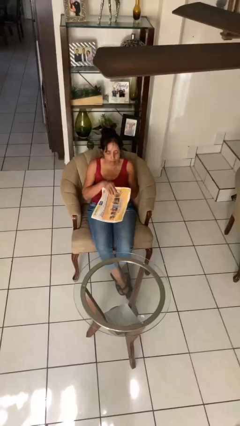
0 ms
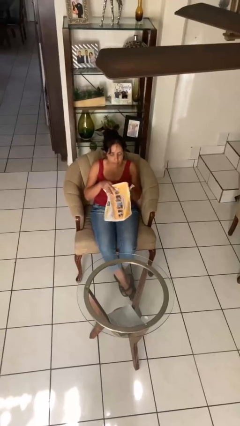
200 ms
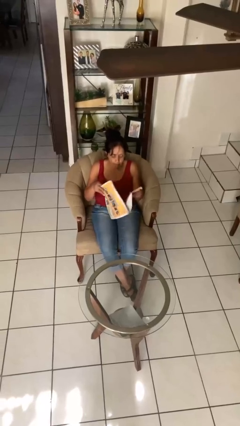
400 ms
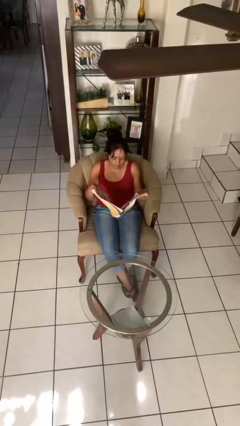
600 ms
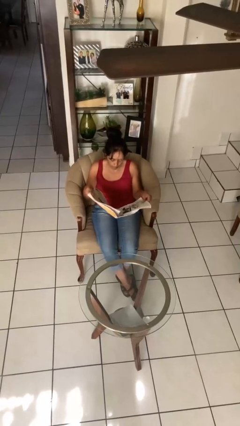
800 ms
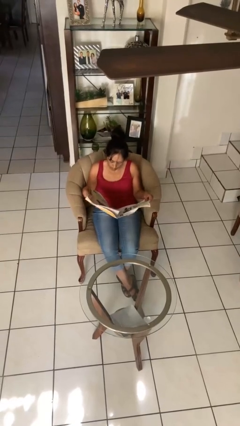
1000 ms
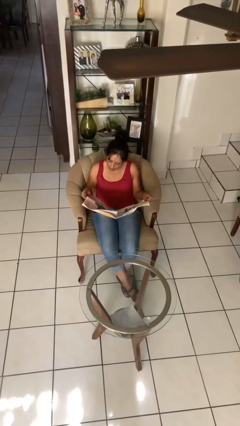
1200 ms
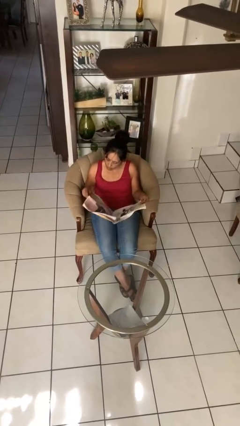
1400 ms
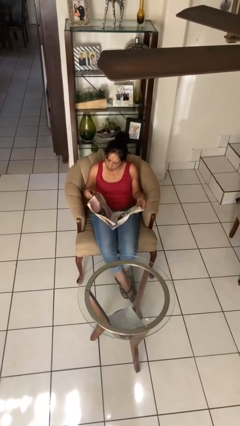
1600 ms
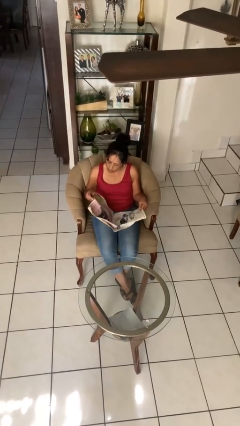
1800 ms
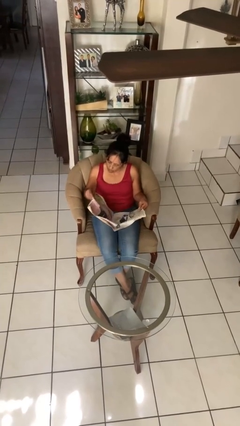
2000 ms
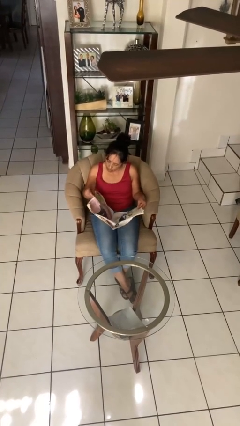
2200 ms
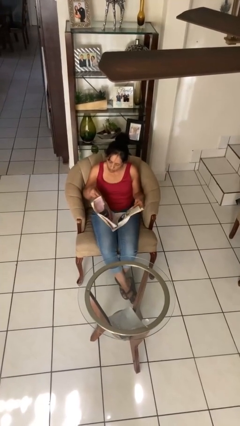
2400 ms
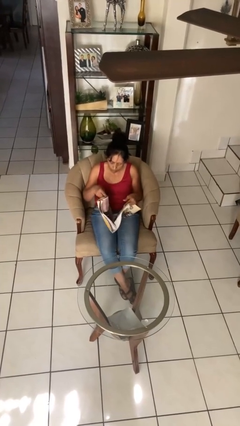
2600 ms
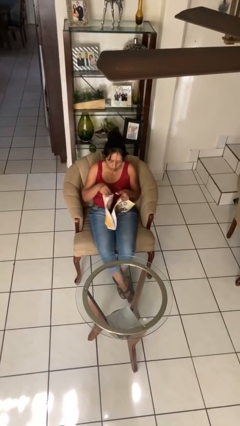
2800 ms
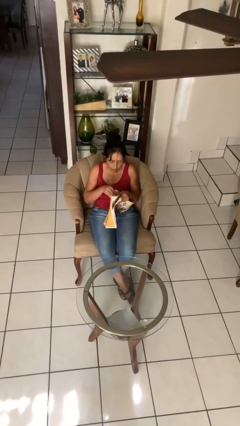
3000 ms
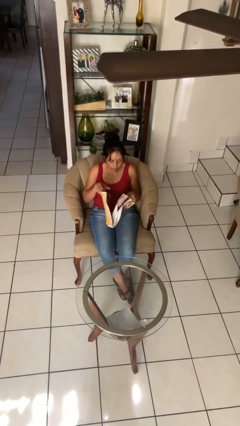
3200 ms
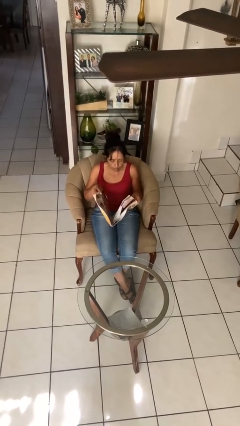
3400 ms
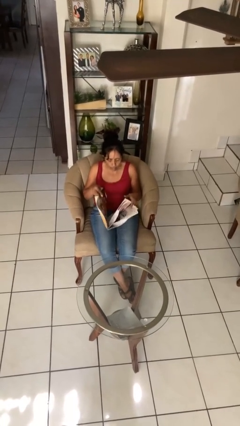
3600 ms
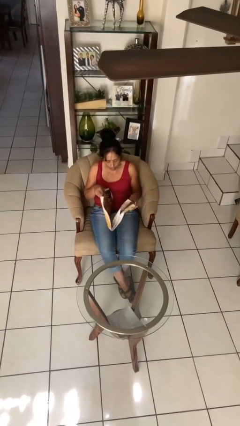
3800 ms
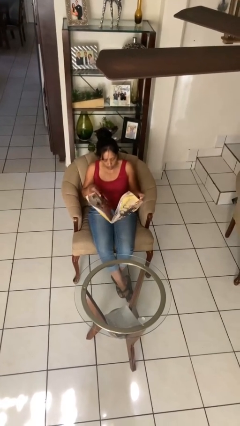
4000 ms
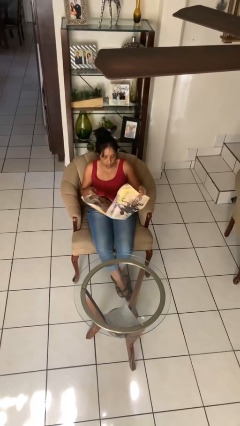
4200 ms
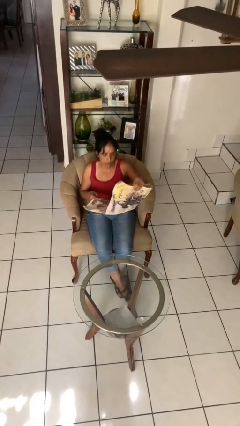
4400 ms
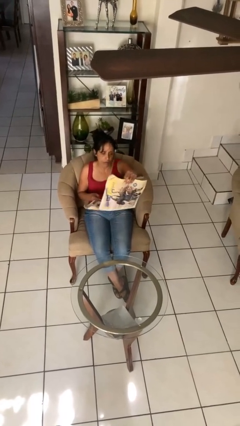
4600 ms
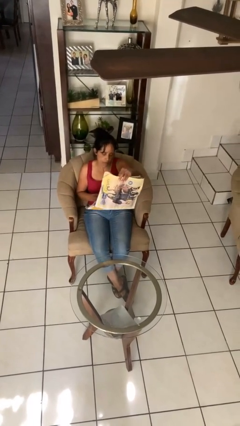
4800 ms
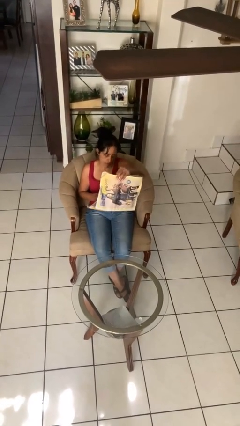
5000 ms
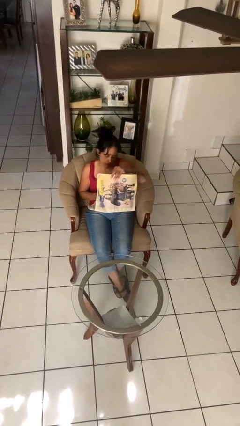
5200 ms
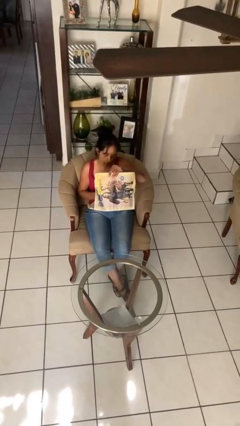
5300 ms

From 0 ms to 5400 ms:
person reads newspaper

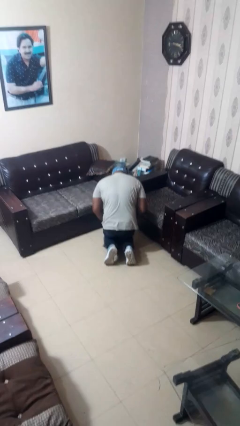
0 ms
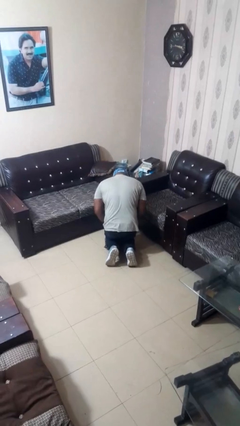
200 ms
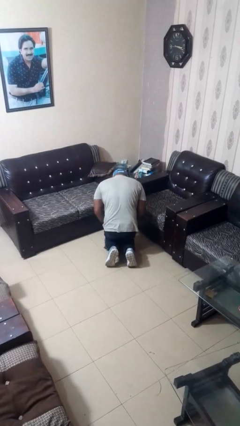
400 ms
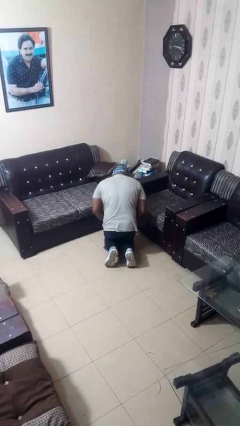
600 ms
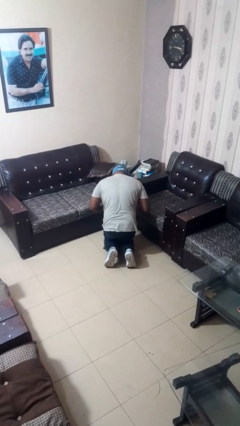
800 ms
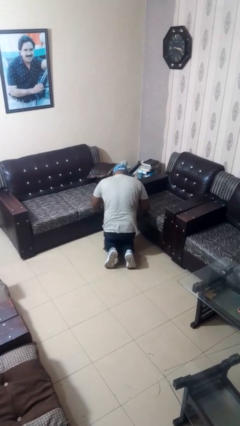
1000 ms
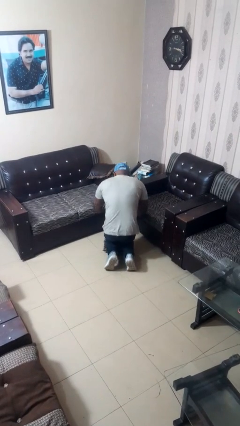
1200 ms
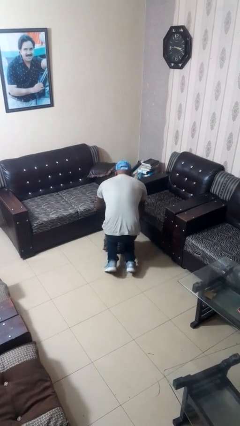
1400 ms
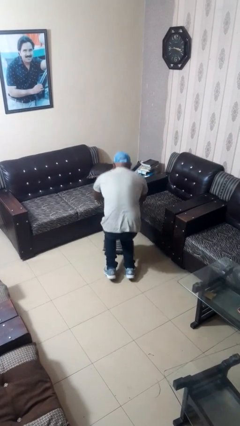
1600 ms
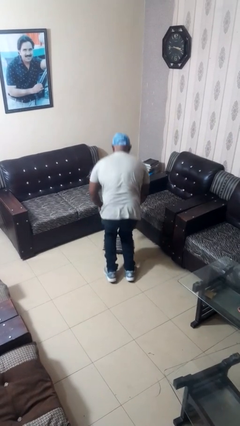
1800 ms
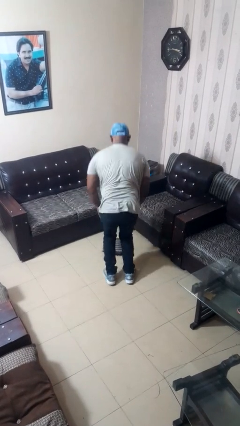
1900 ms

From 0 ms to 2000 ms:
person stands up from floor

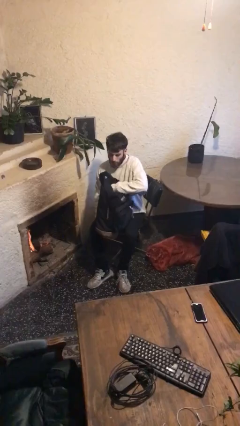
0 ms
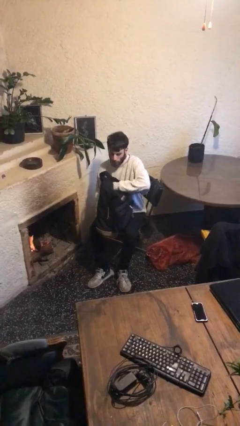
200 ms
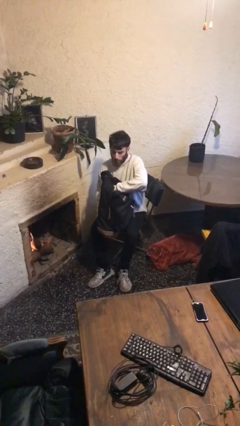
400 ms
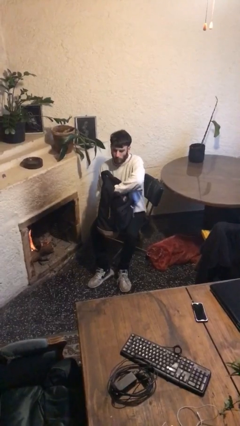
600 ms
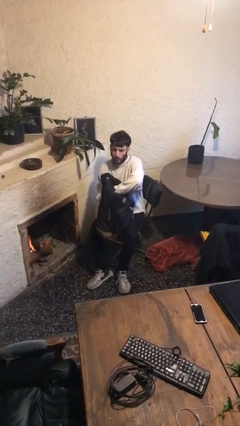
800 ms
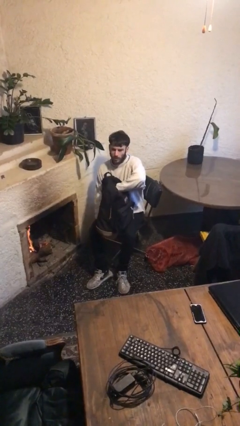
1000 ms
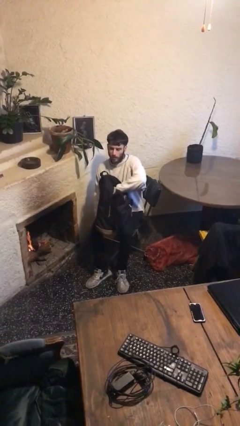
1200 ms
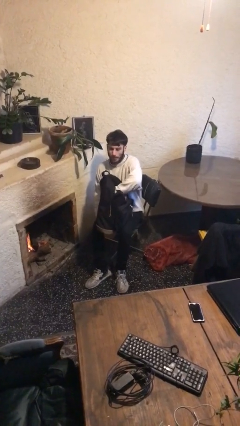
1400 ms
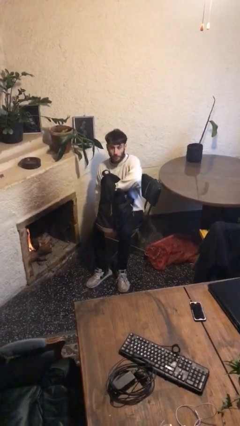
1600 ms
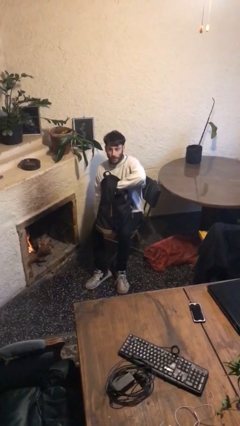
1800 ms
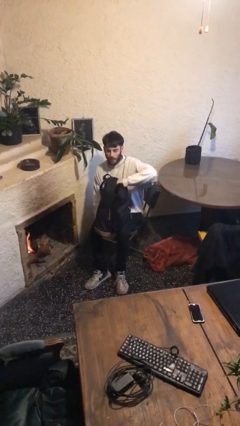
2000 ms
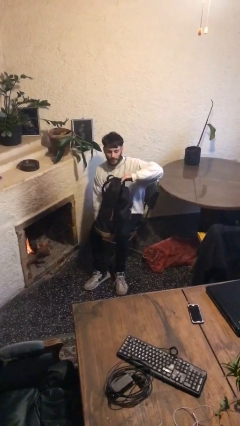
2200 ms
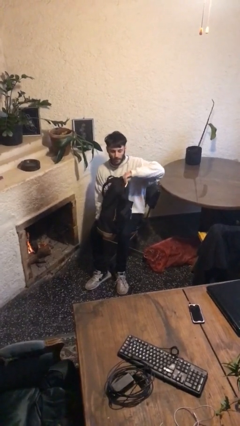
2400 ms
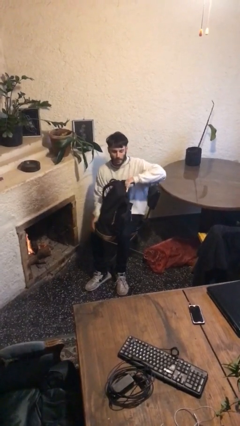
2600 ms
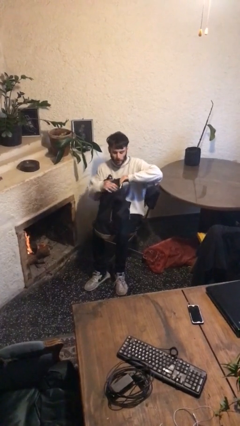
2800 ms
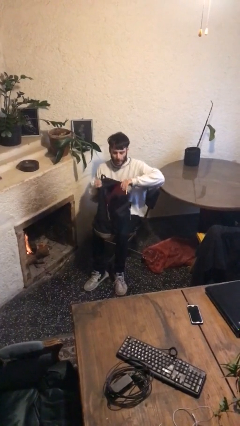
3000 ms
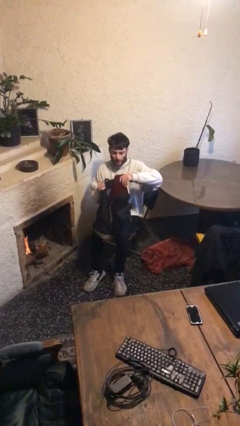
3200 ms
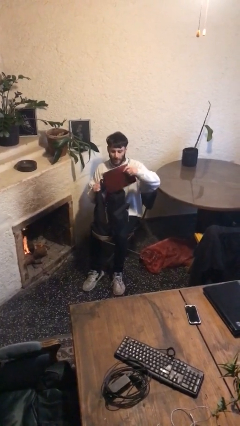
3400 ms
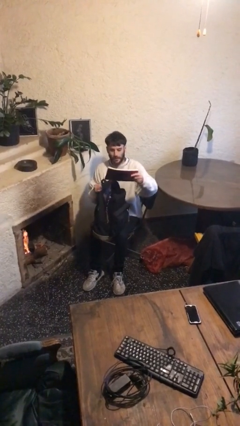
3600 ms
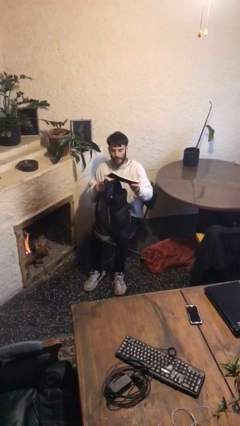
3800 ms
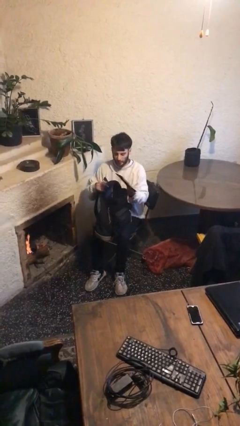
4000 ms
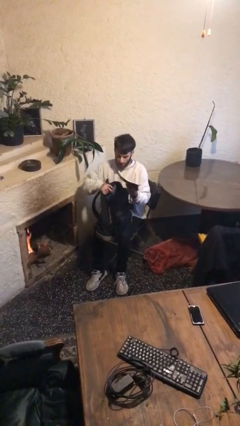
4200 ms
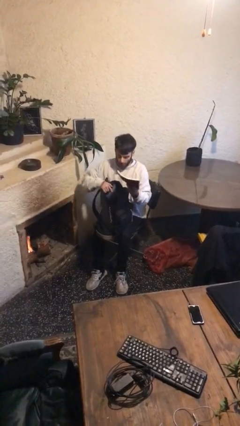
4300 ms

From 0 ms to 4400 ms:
person takes object from backpack

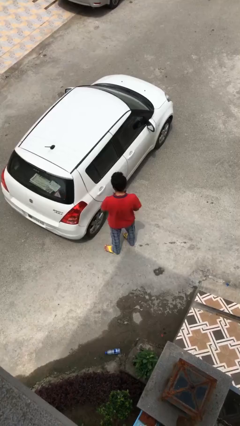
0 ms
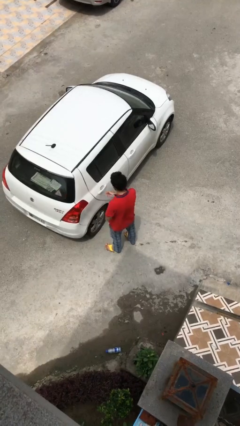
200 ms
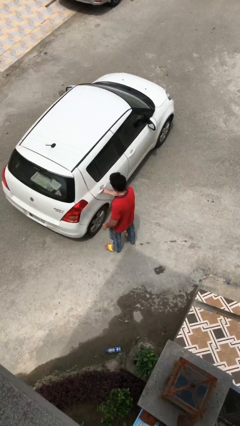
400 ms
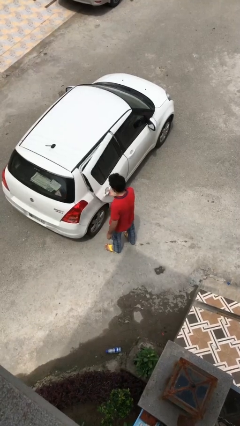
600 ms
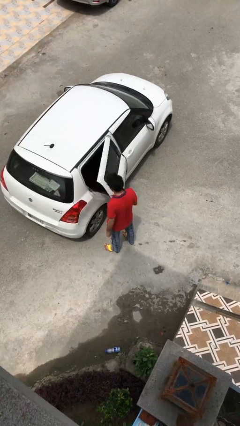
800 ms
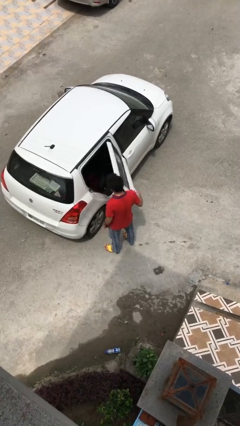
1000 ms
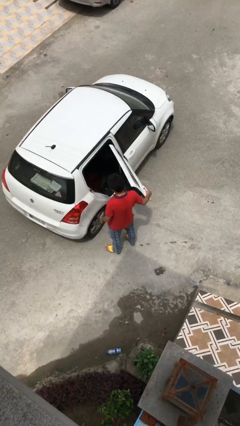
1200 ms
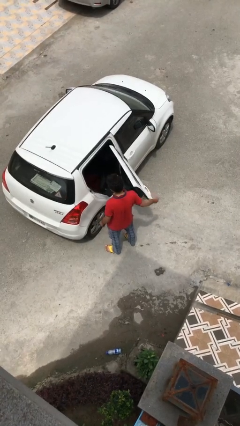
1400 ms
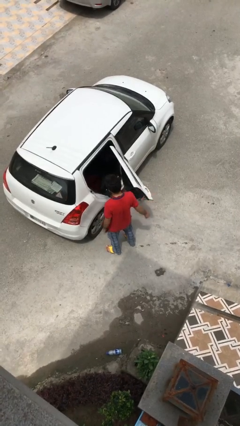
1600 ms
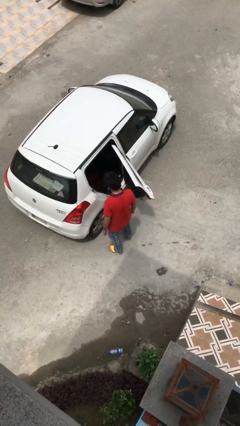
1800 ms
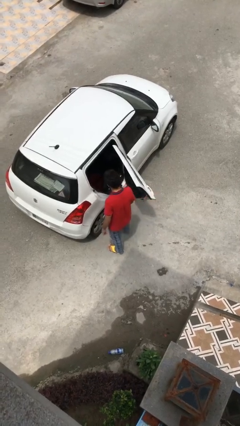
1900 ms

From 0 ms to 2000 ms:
person opens car door

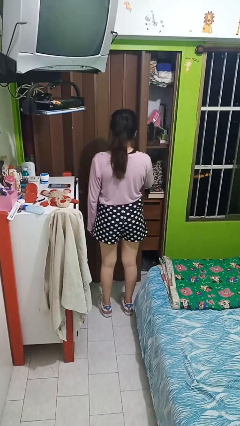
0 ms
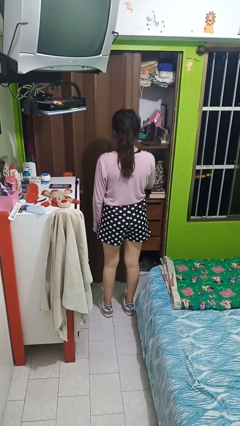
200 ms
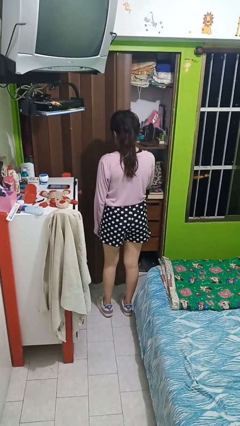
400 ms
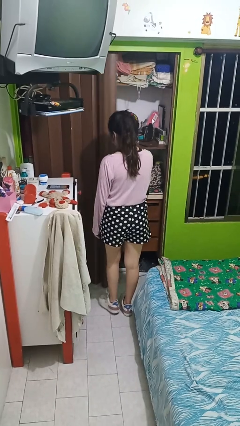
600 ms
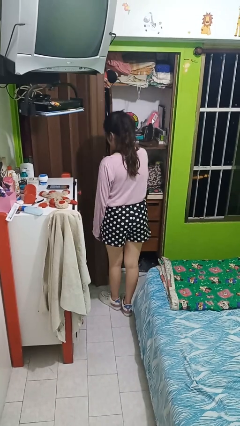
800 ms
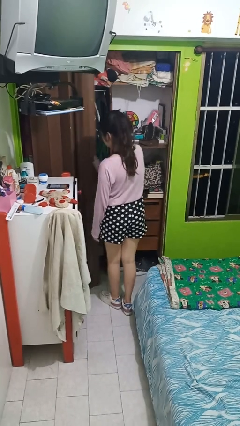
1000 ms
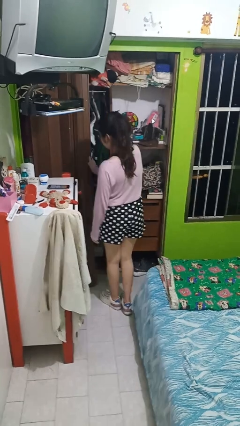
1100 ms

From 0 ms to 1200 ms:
person opens sliding door

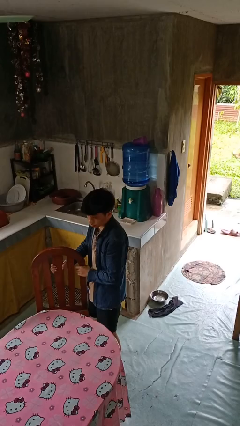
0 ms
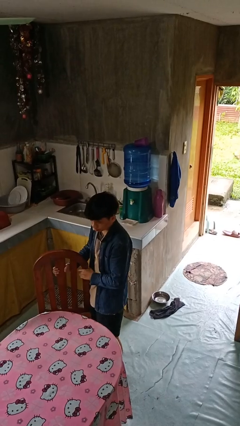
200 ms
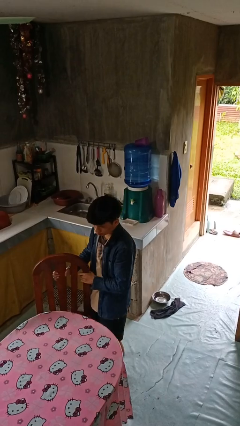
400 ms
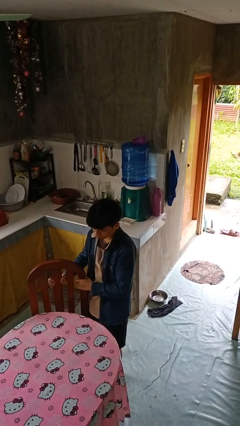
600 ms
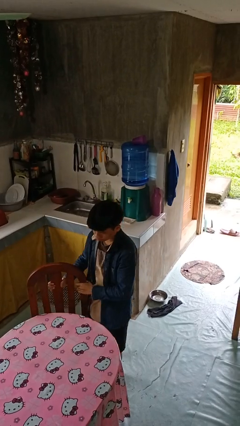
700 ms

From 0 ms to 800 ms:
person pushes in chair

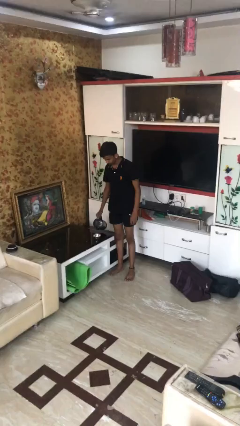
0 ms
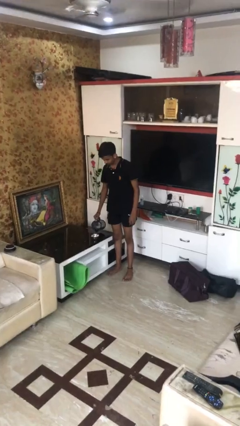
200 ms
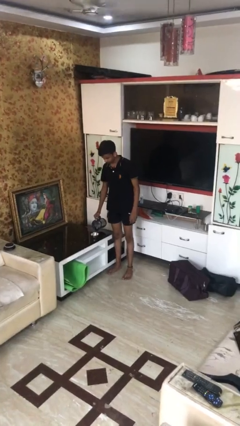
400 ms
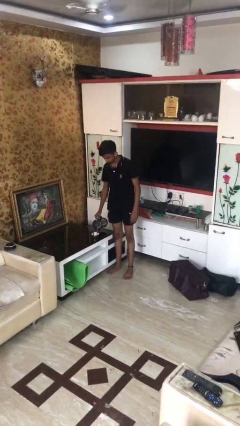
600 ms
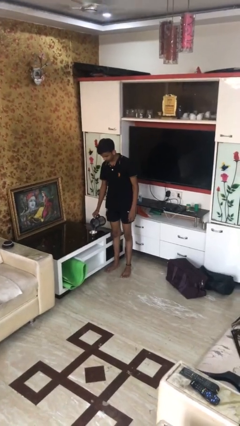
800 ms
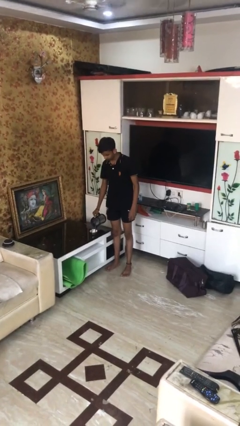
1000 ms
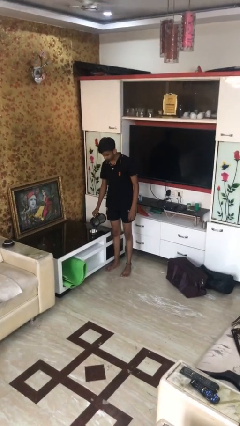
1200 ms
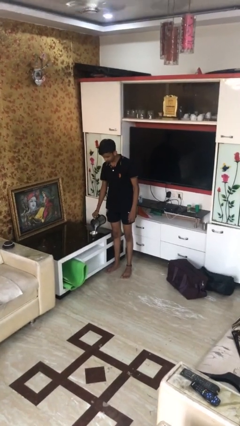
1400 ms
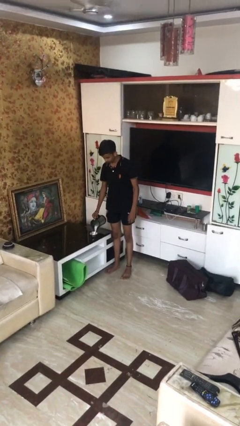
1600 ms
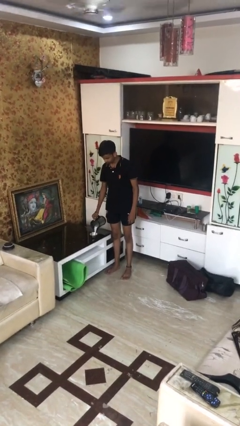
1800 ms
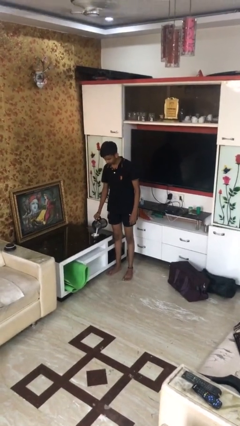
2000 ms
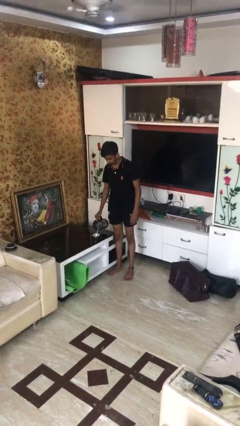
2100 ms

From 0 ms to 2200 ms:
person pours into bowl
